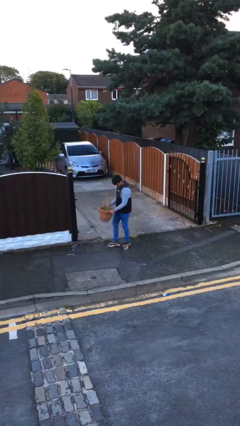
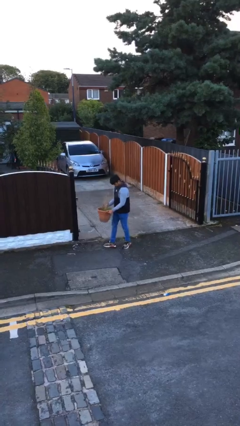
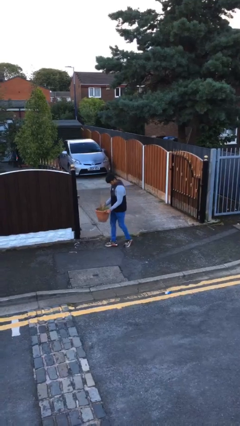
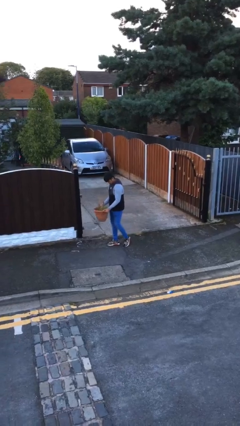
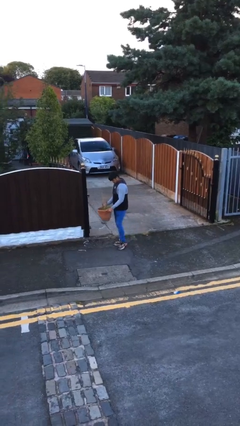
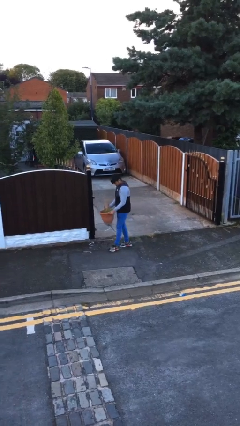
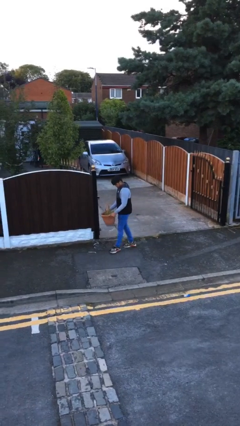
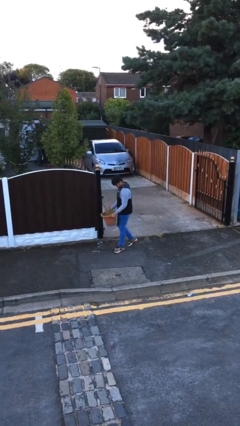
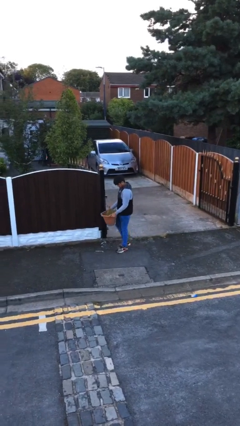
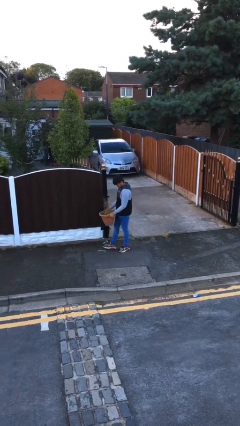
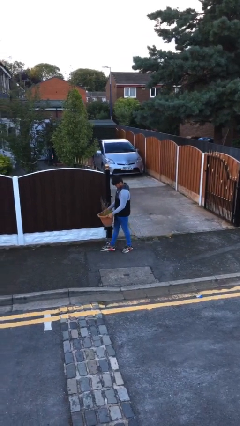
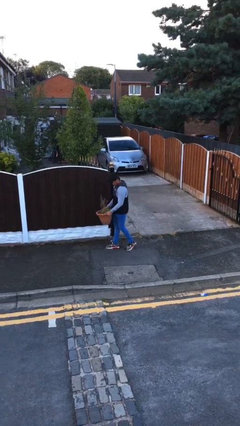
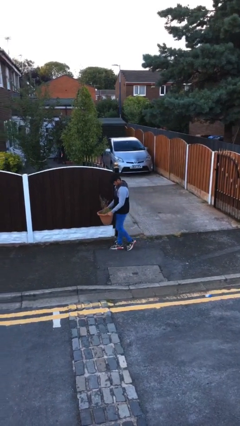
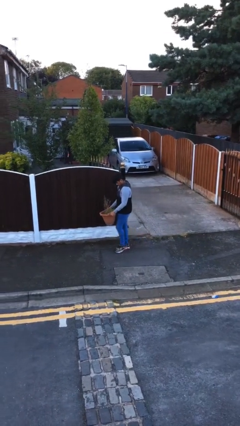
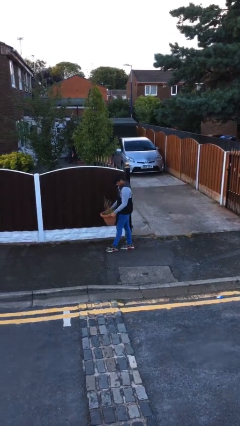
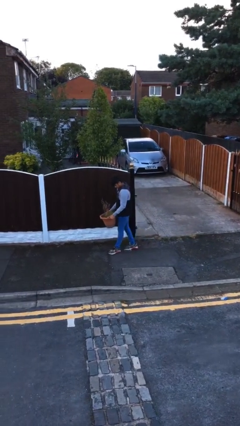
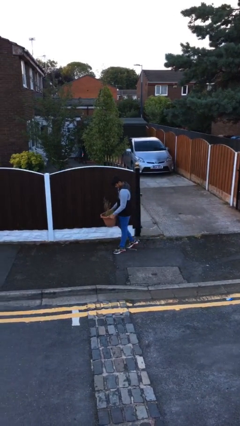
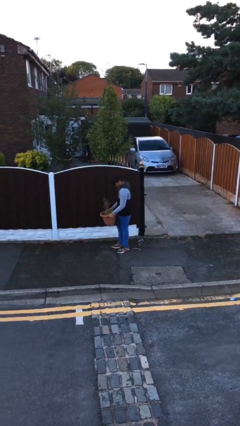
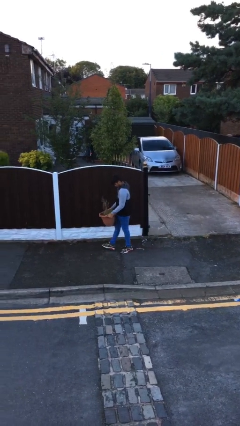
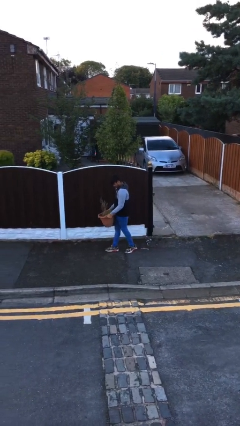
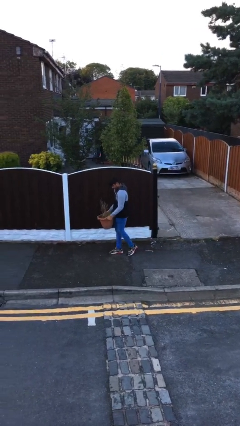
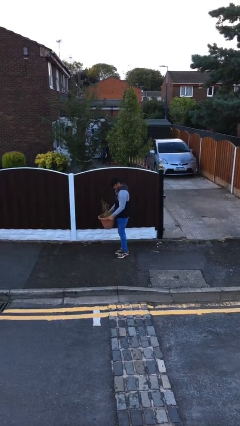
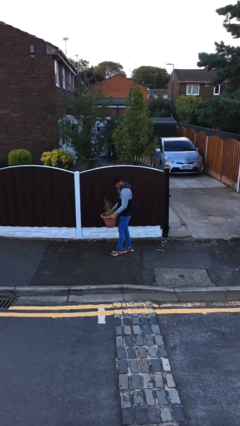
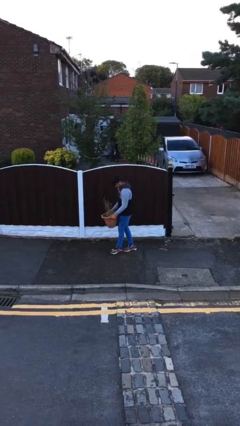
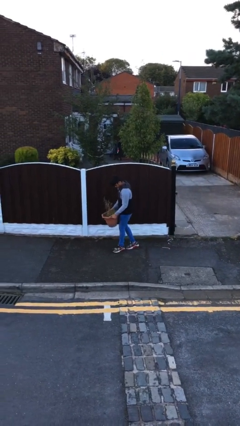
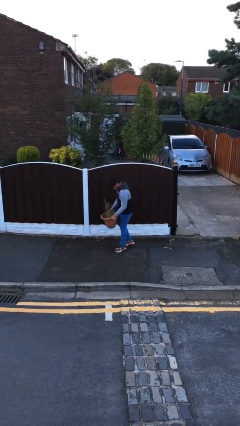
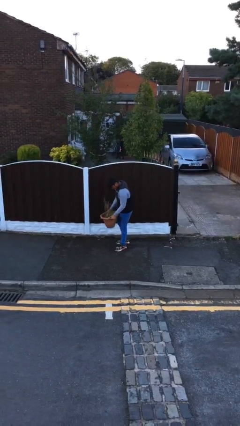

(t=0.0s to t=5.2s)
person carries heavy object

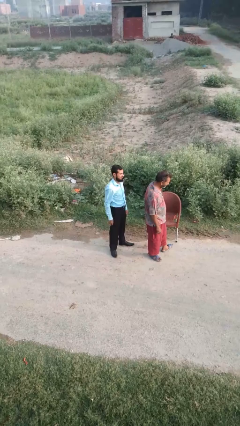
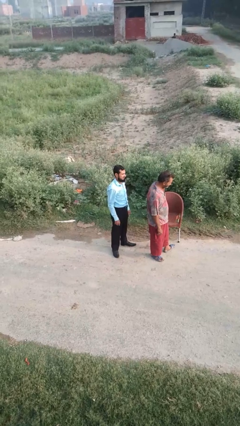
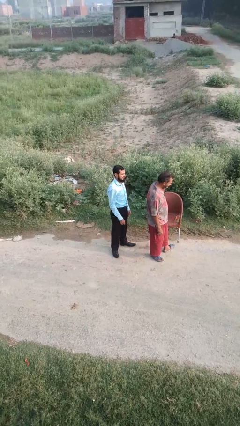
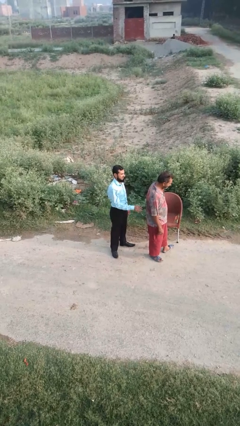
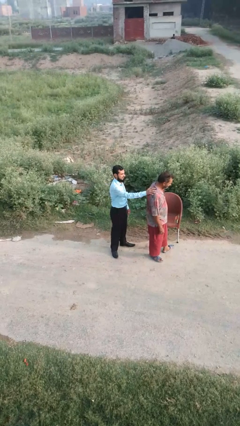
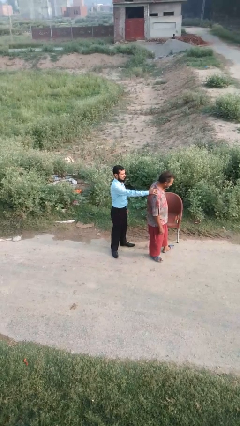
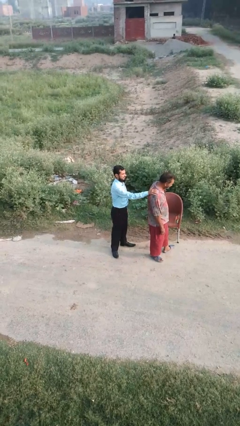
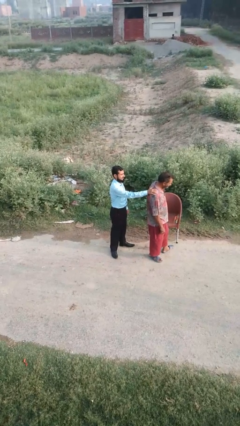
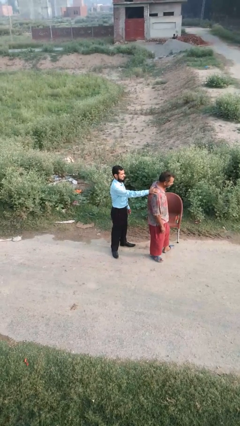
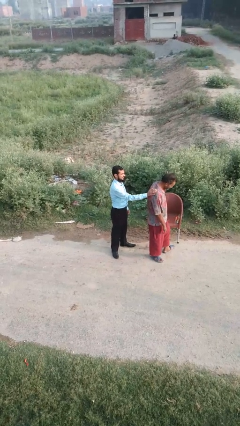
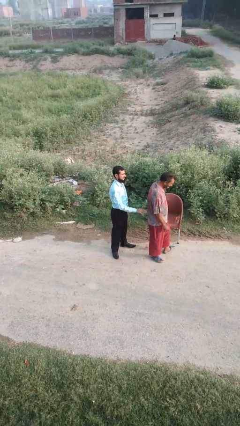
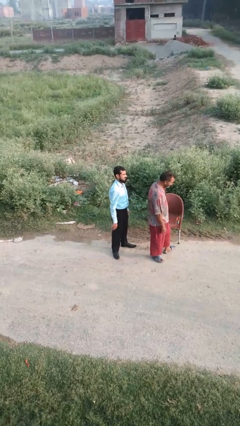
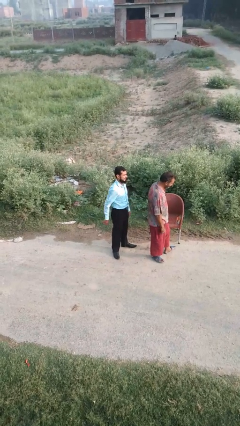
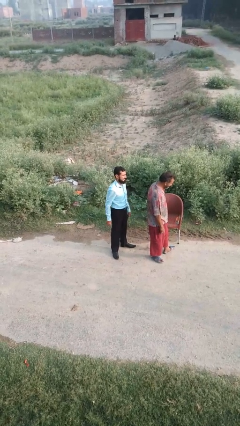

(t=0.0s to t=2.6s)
person touches back of person

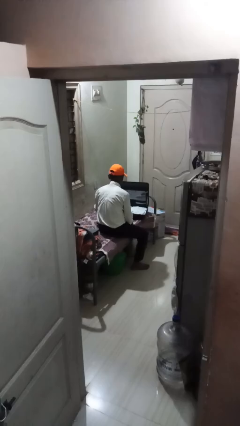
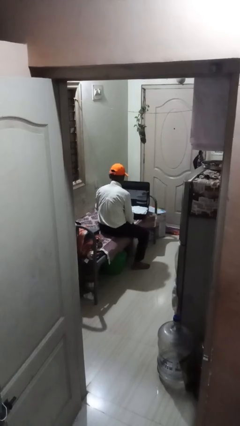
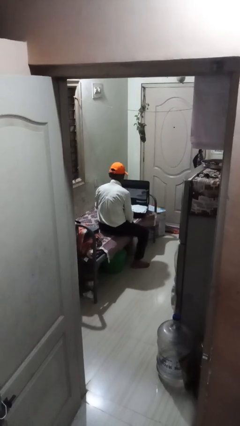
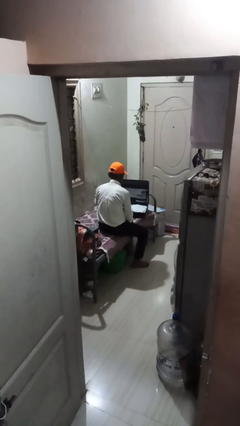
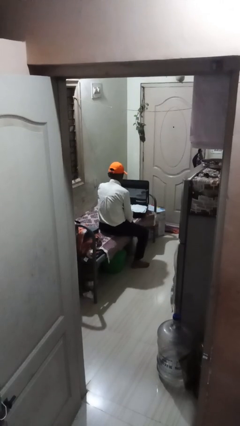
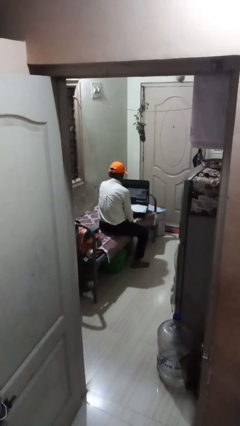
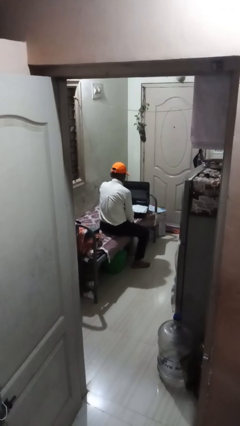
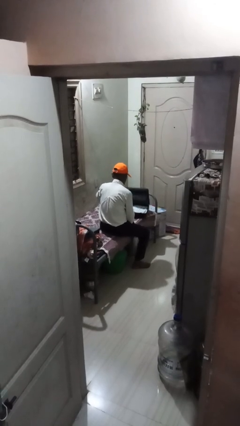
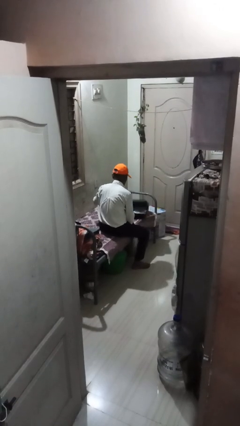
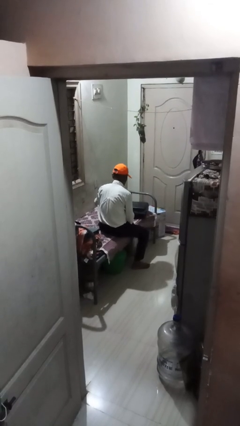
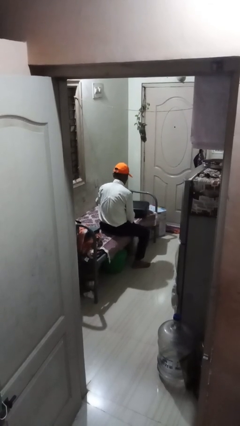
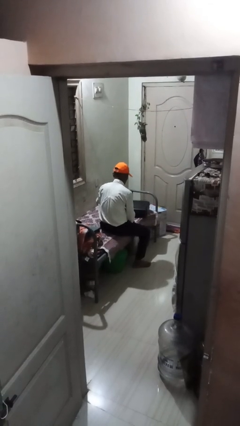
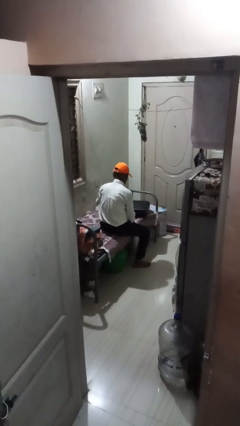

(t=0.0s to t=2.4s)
person closes suitcase

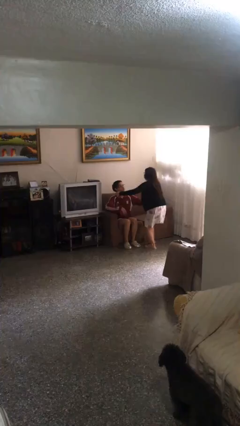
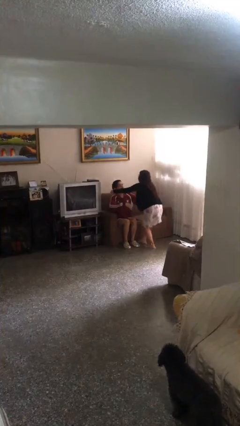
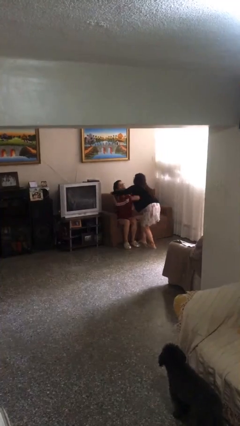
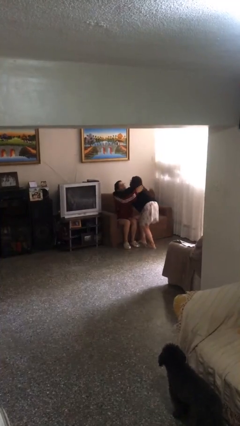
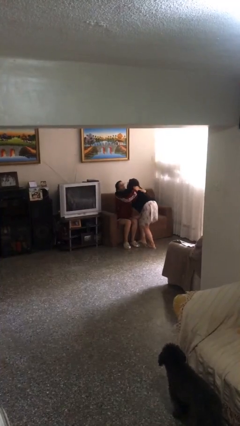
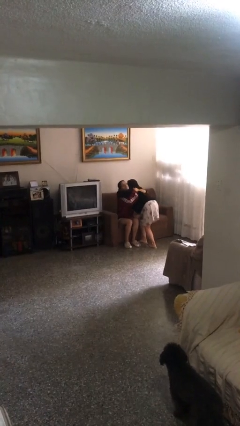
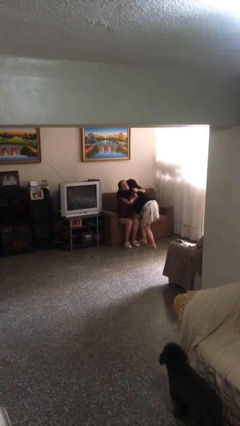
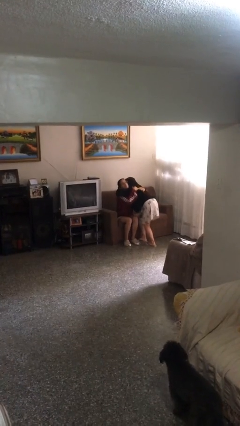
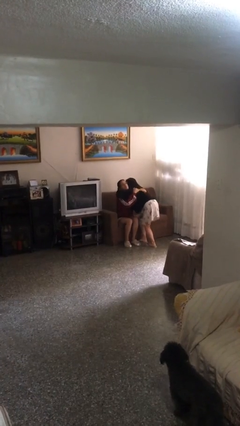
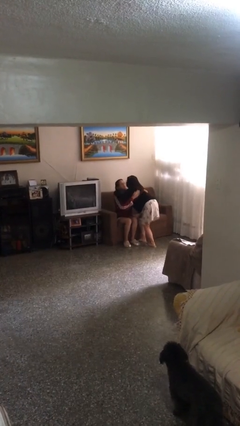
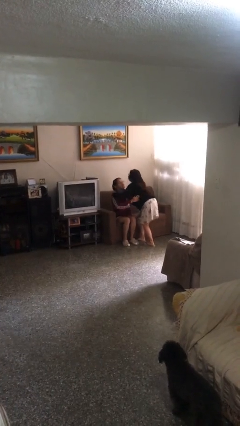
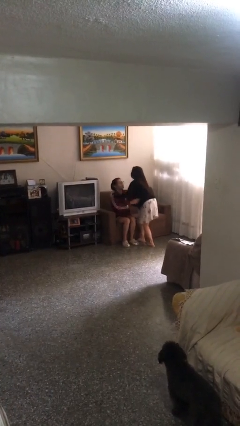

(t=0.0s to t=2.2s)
person embraces person

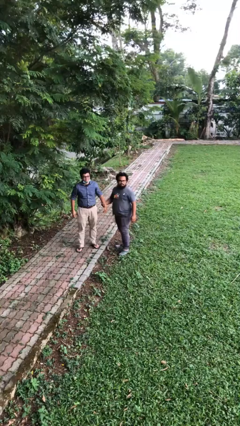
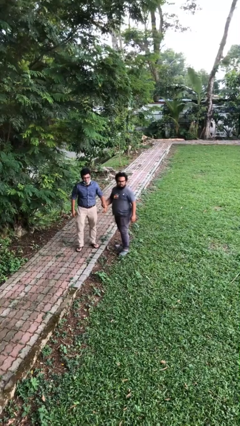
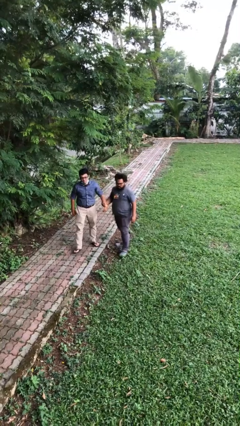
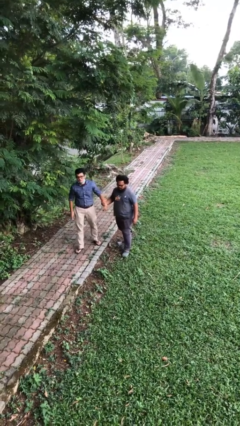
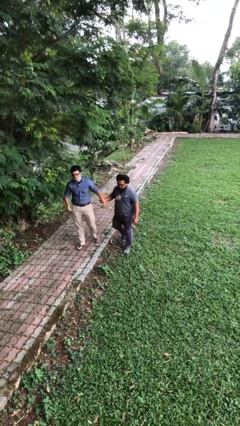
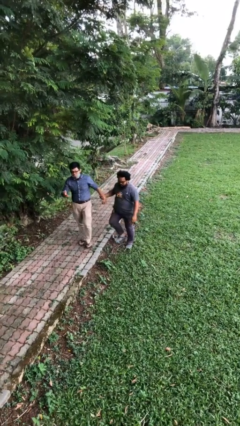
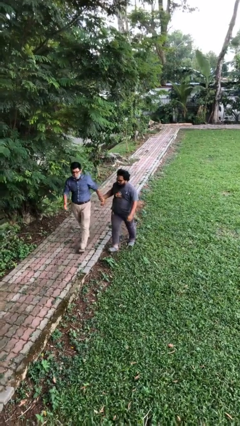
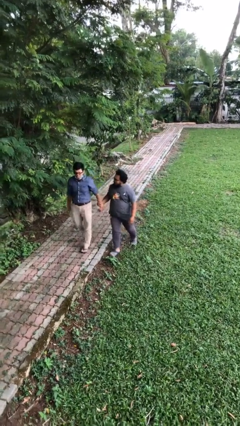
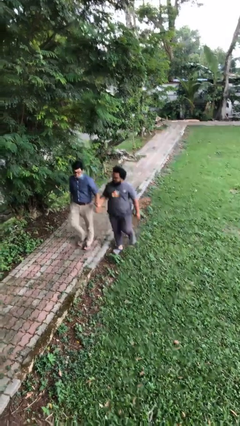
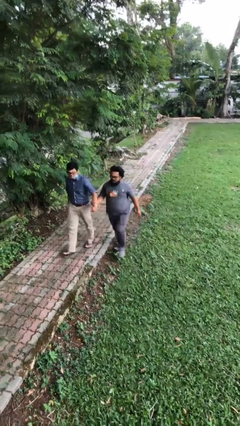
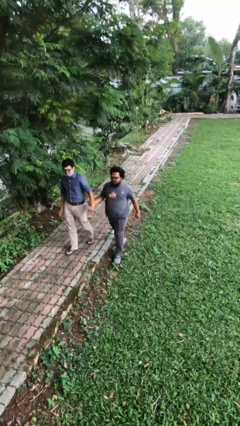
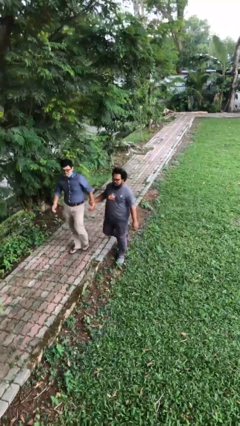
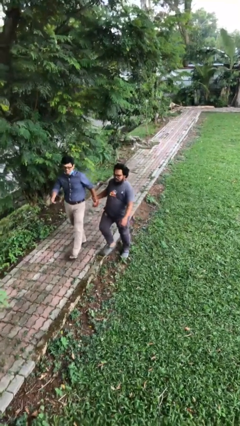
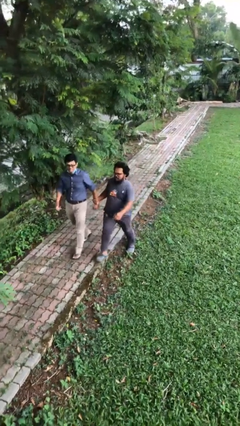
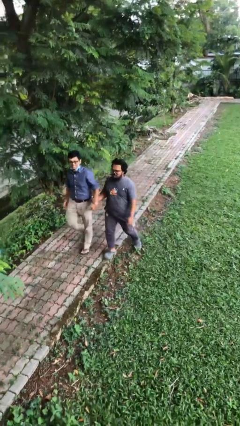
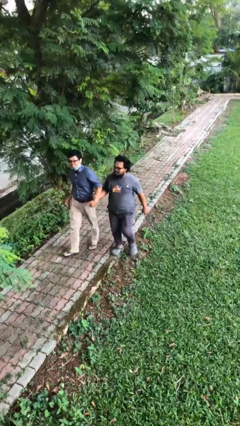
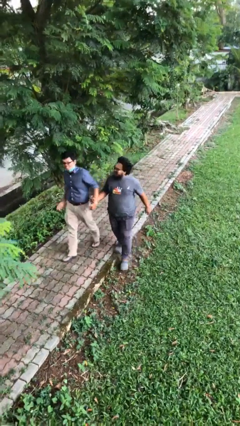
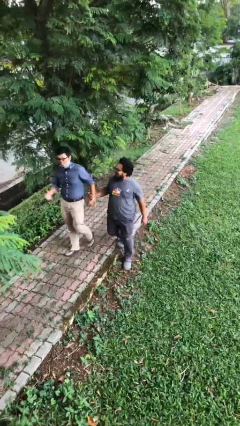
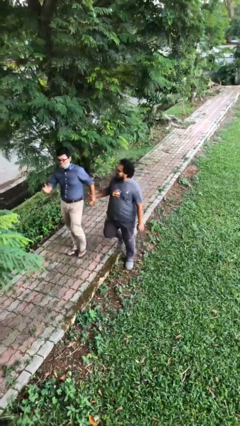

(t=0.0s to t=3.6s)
person holds hand

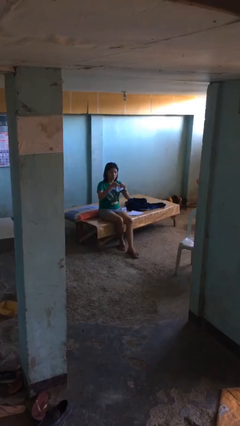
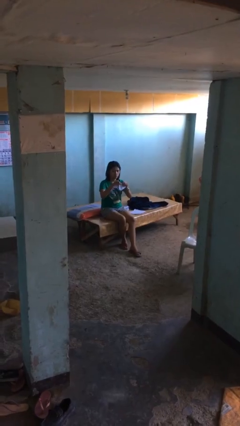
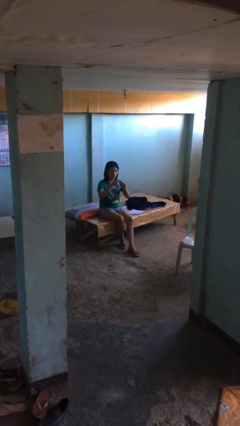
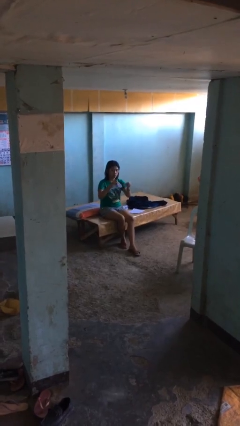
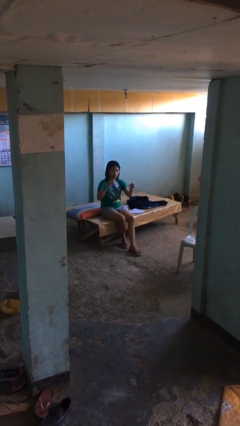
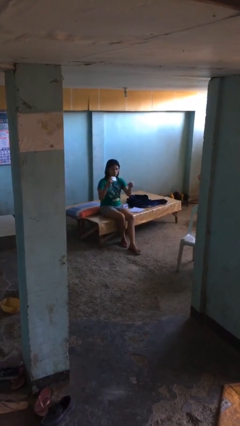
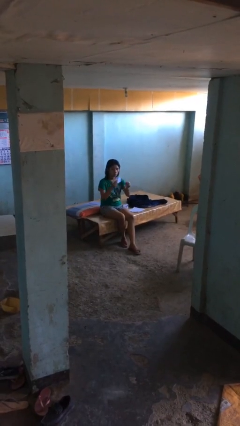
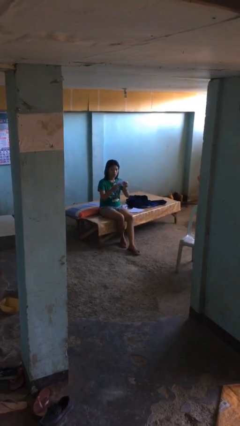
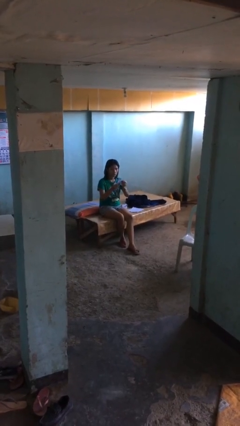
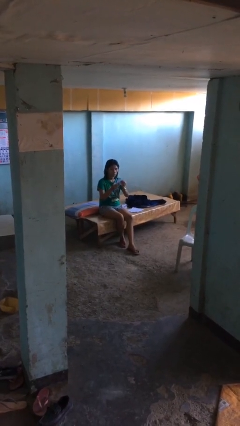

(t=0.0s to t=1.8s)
person tears paper
